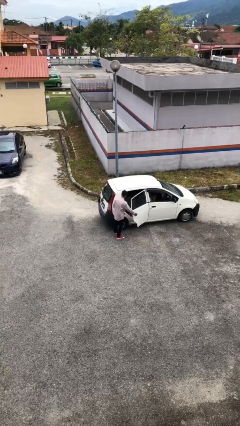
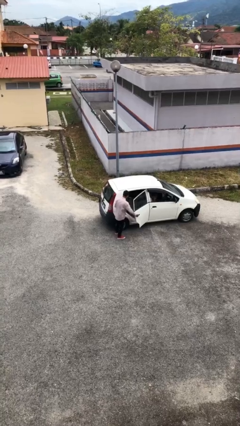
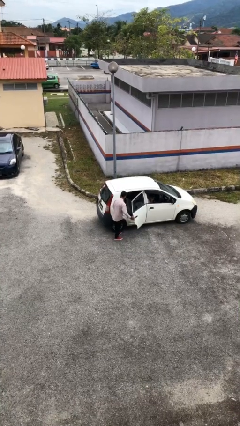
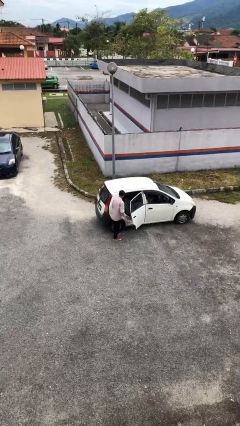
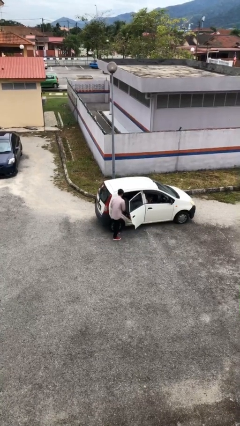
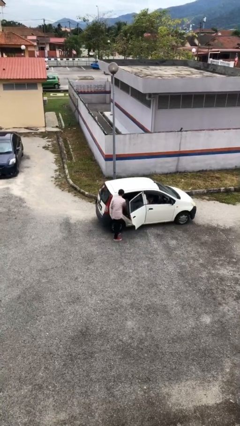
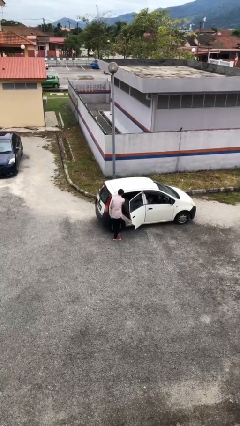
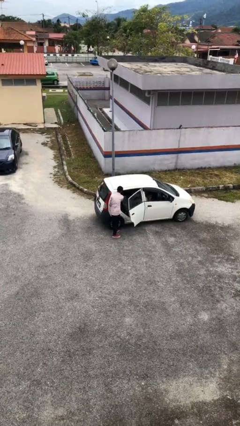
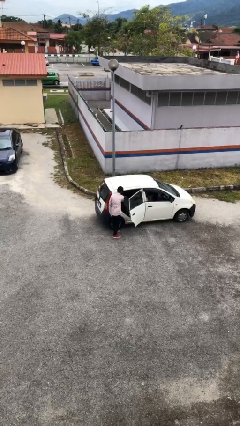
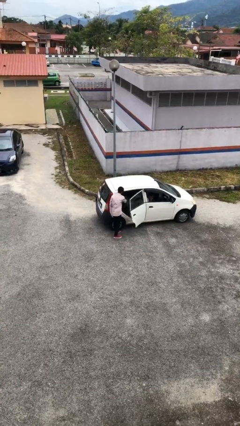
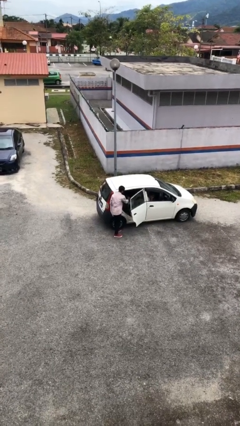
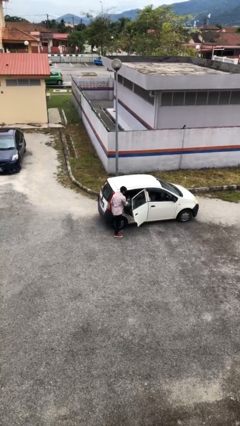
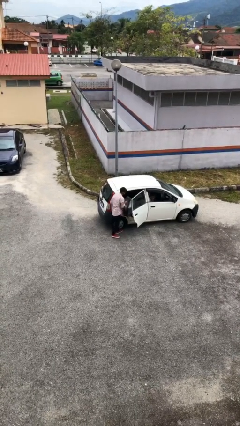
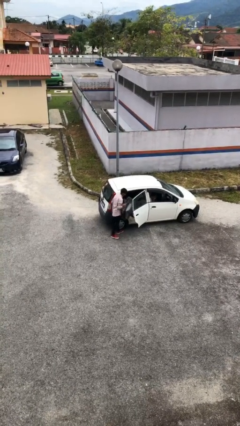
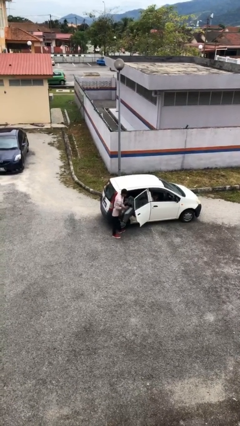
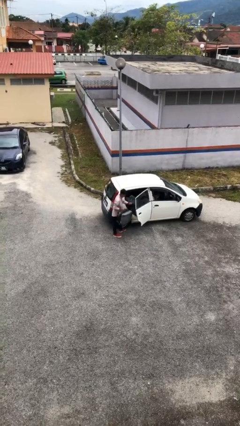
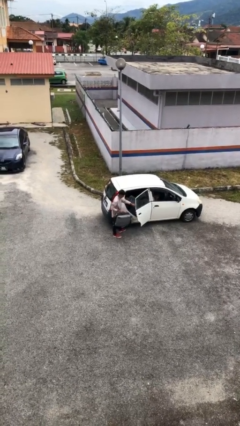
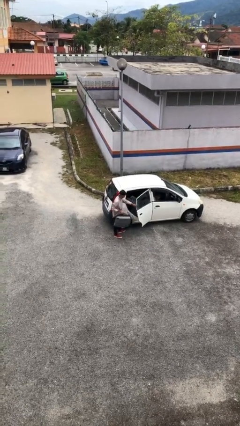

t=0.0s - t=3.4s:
person unloads car

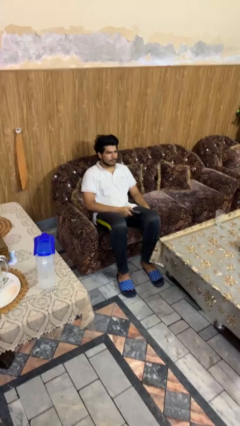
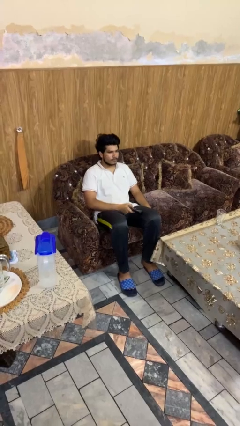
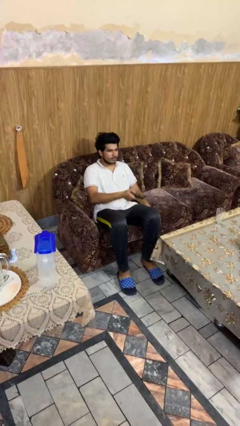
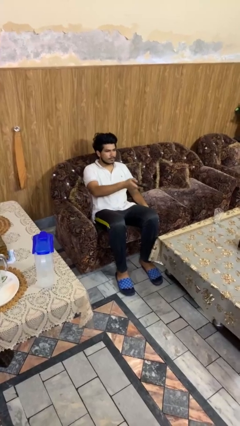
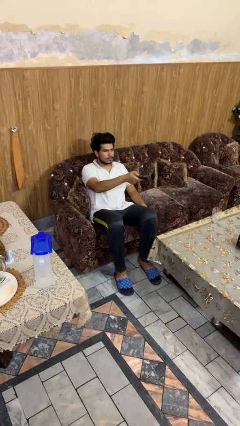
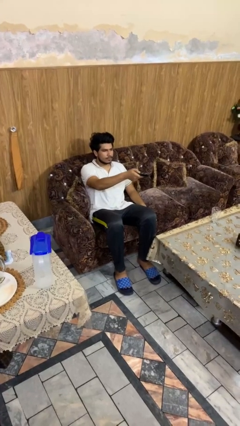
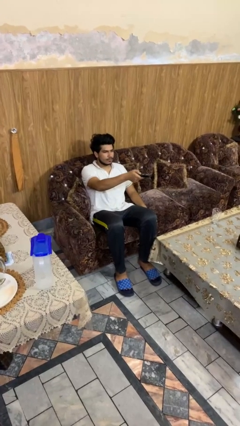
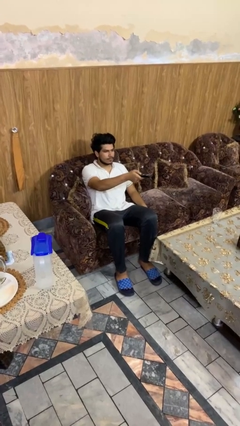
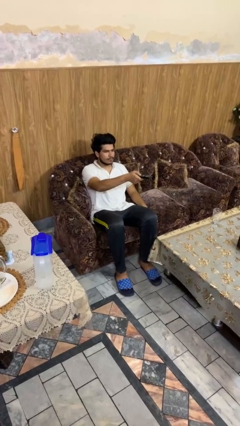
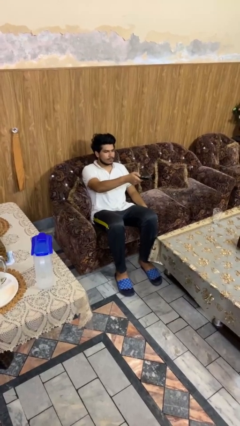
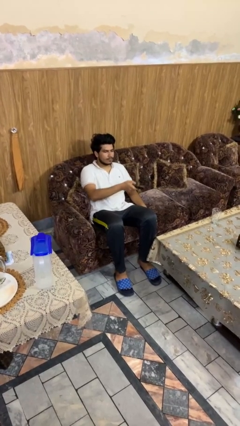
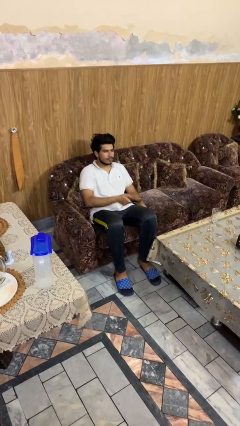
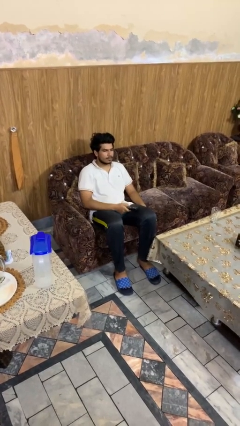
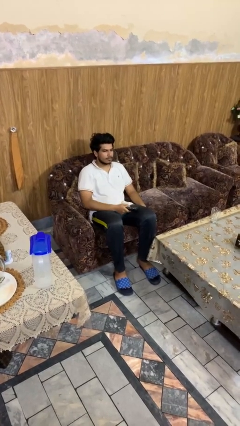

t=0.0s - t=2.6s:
person uses television remote

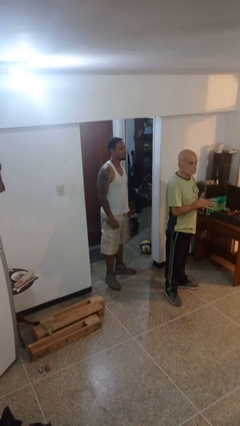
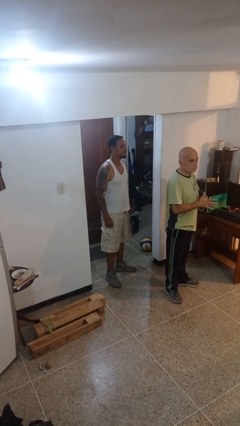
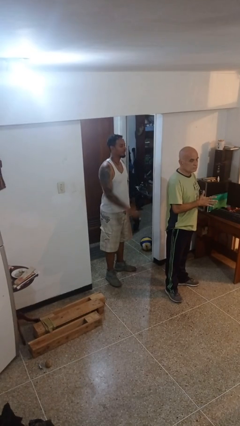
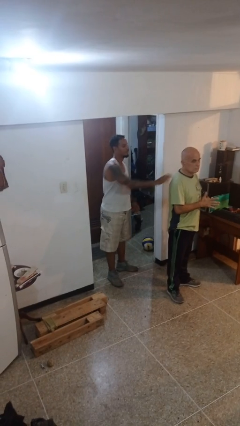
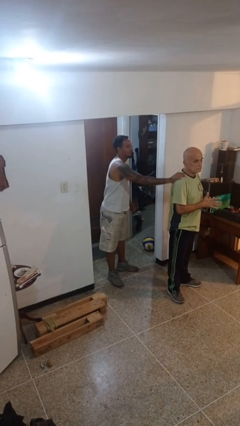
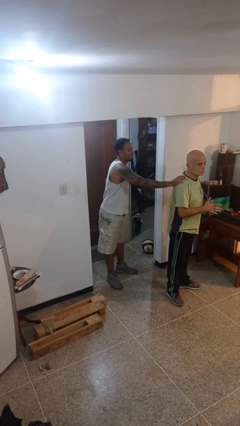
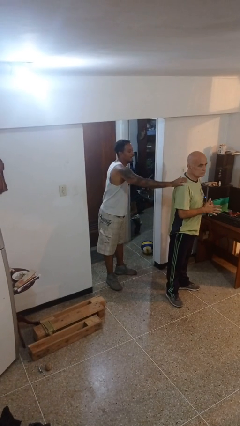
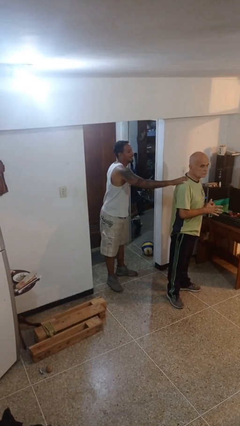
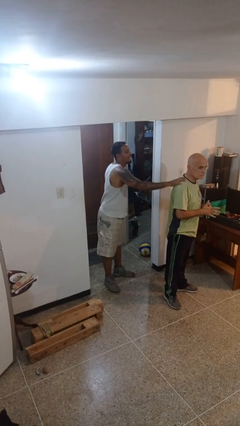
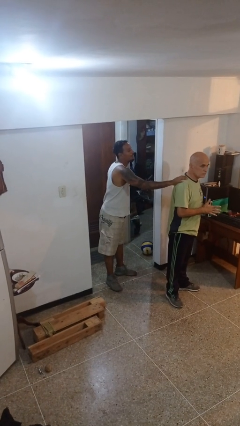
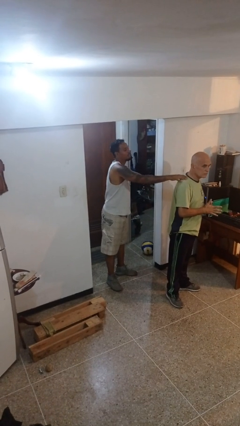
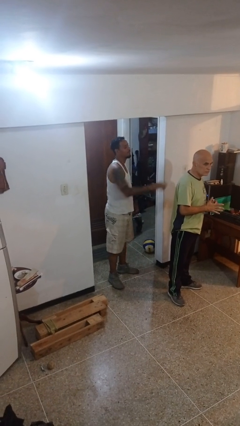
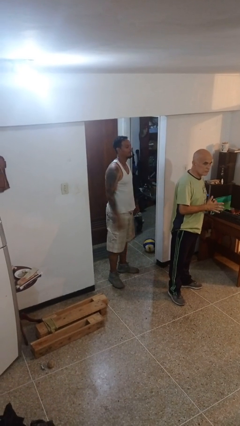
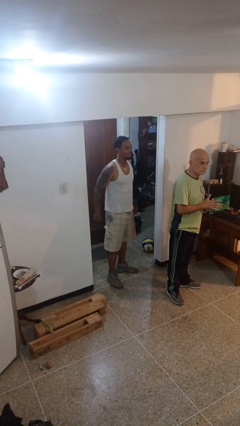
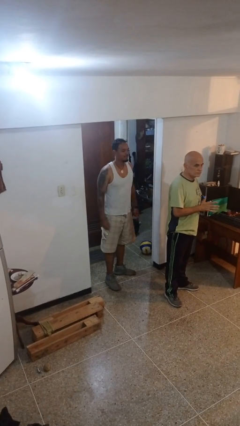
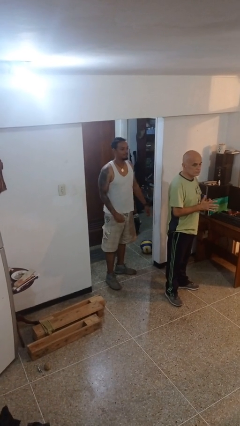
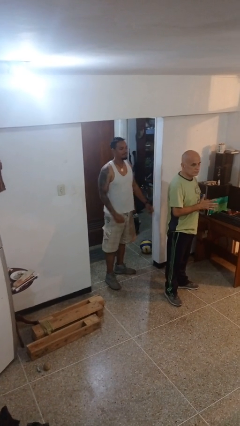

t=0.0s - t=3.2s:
person touches back of person

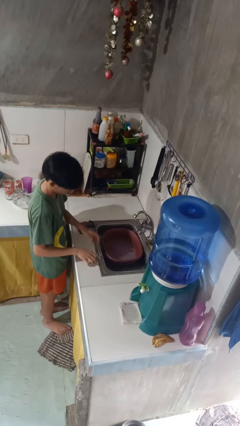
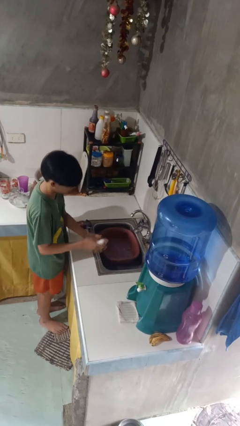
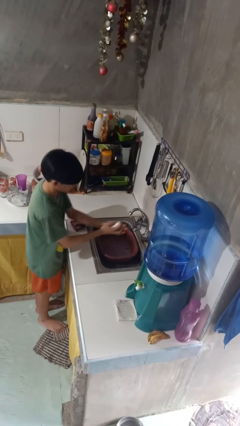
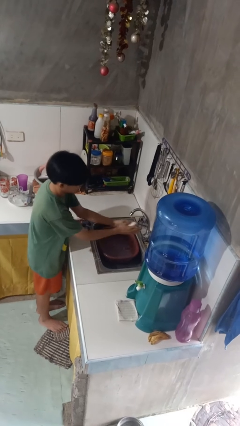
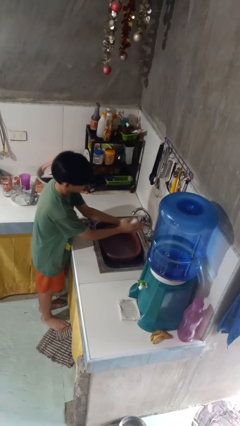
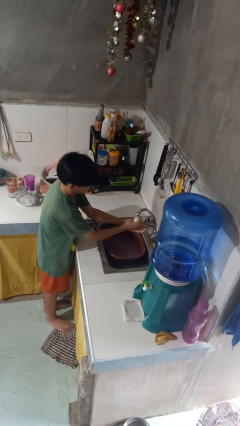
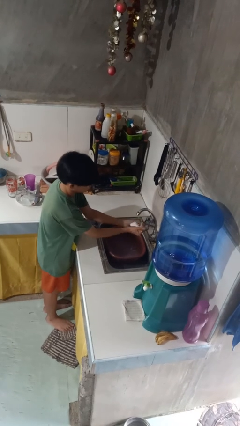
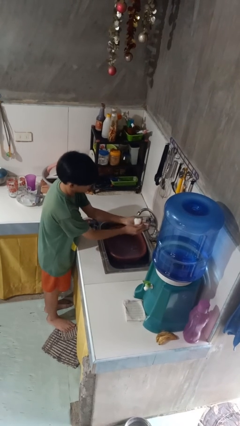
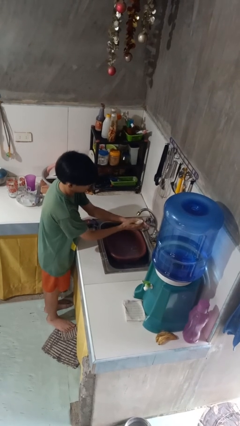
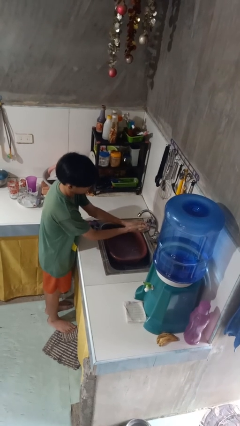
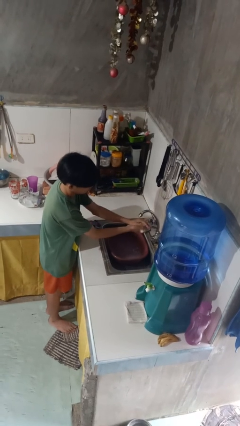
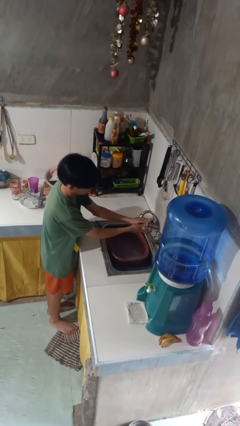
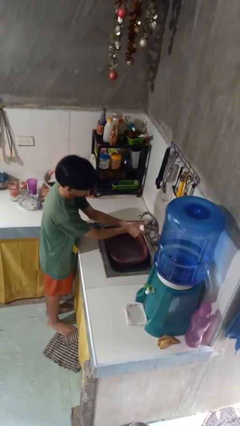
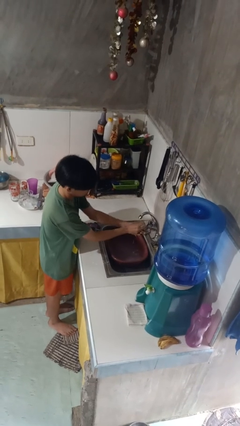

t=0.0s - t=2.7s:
person washes hands

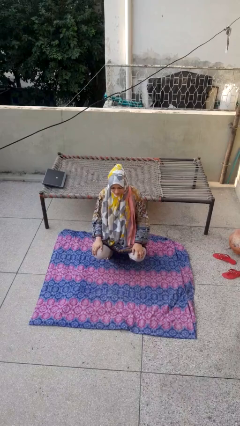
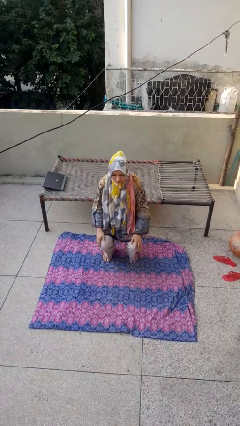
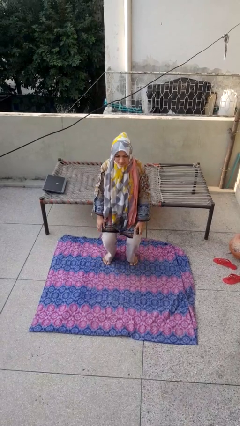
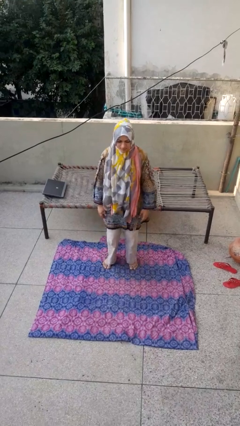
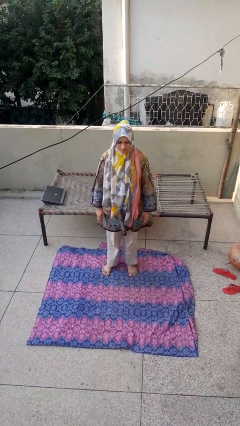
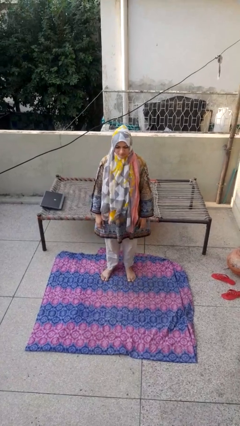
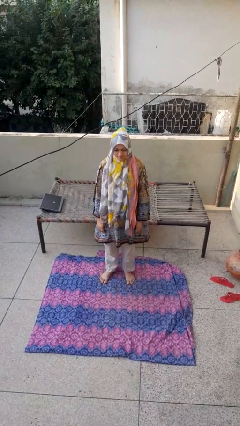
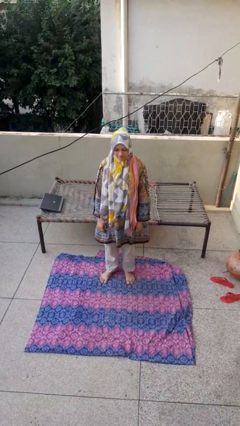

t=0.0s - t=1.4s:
person stands up

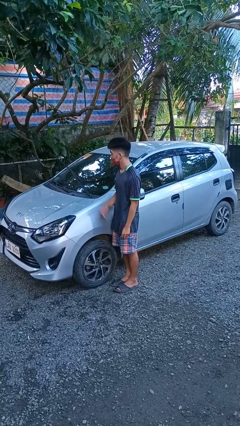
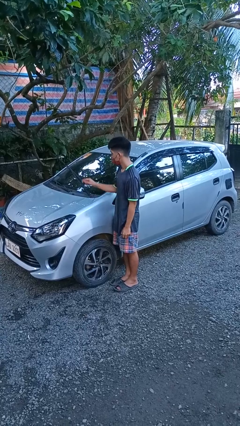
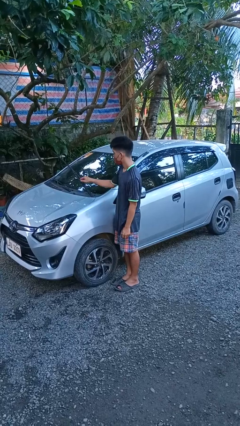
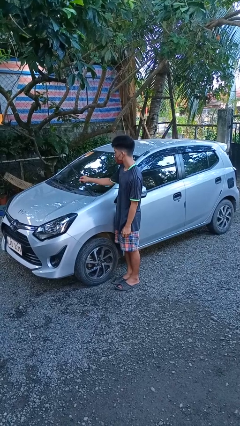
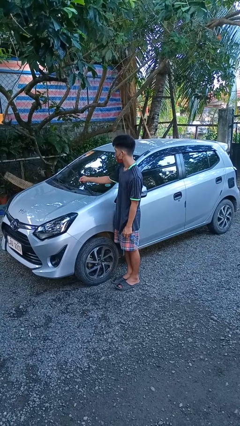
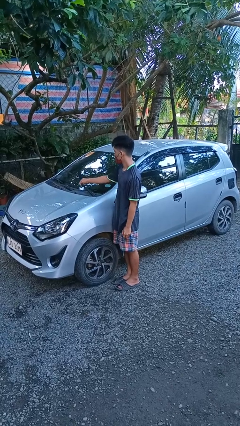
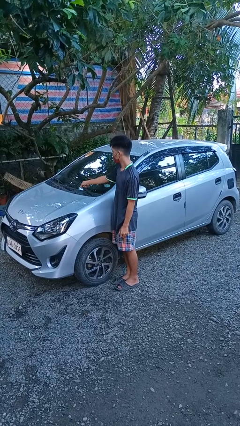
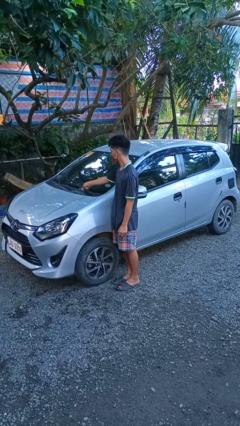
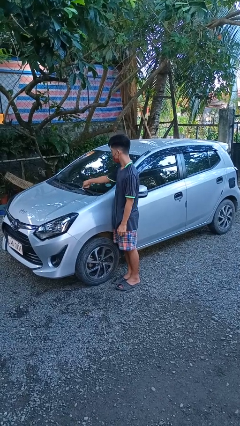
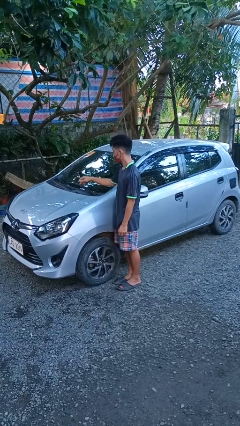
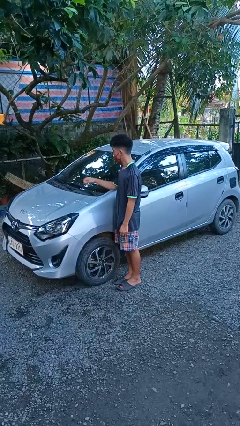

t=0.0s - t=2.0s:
person flips down car wipers

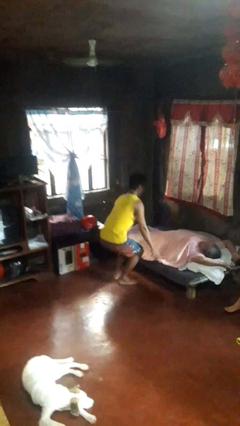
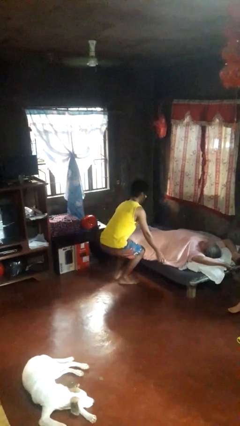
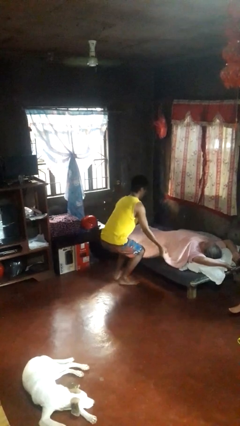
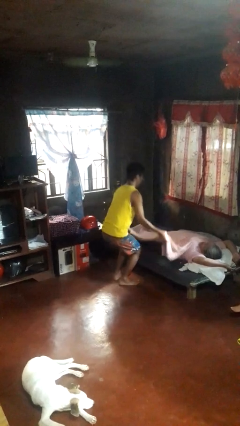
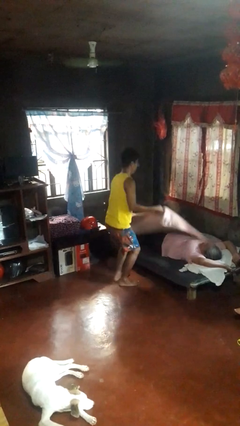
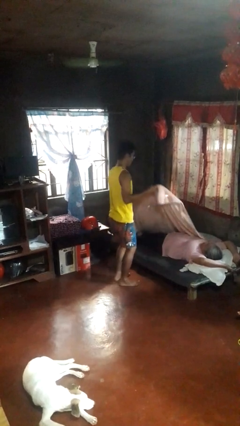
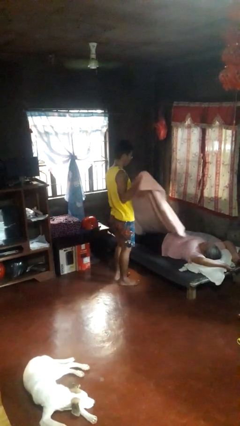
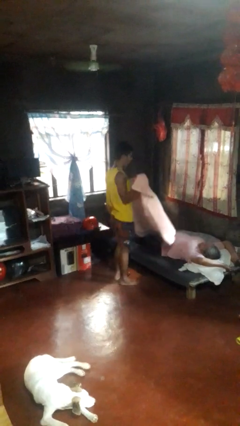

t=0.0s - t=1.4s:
person uncovers friend with blanket

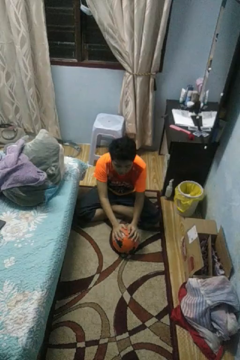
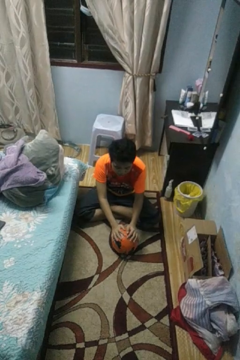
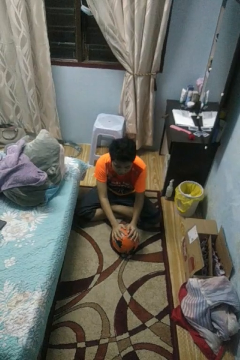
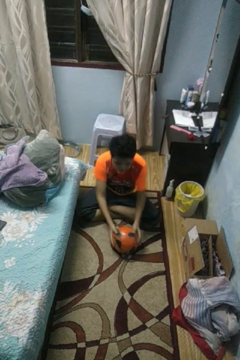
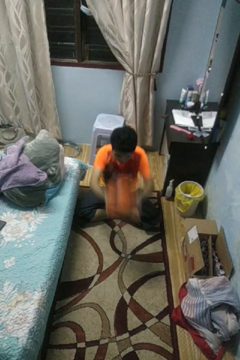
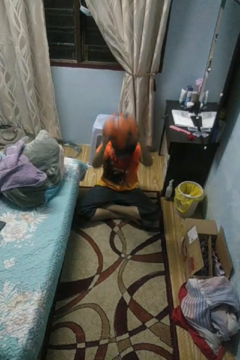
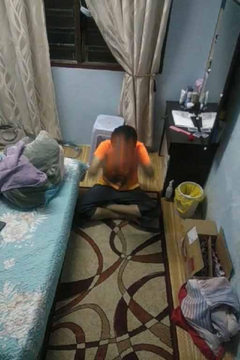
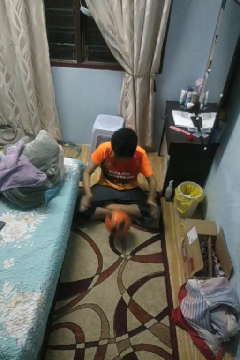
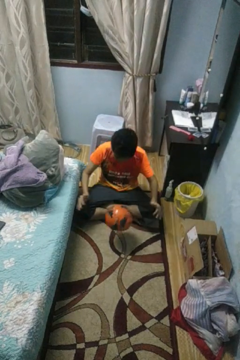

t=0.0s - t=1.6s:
person bounces ball on floor
